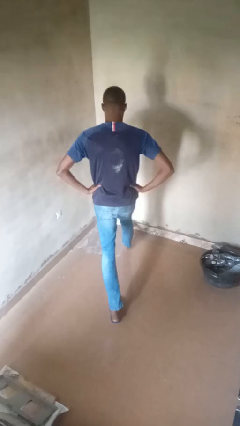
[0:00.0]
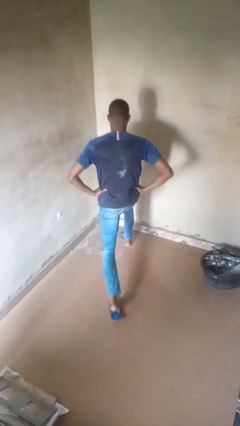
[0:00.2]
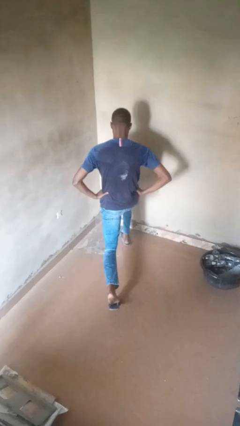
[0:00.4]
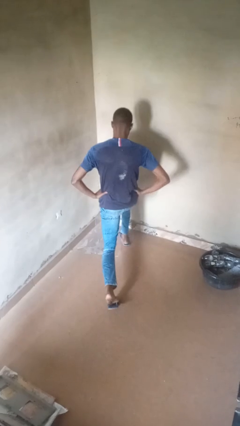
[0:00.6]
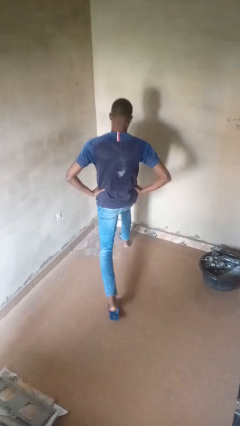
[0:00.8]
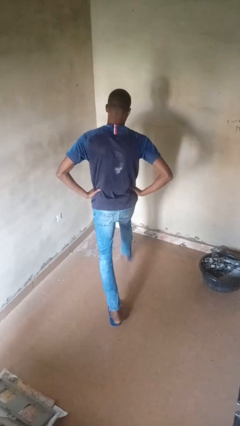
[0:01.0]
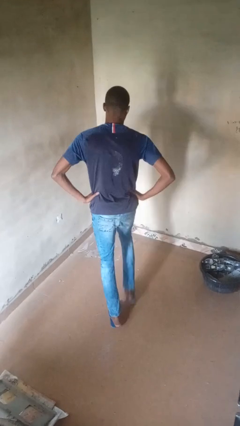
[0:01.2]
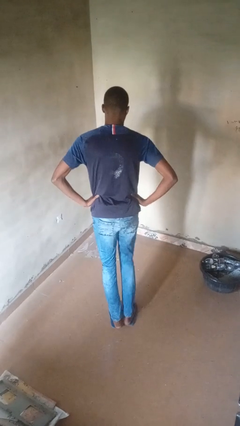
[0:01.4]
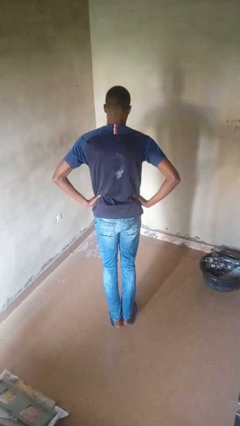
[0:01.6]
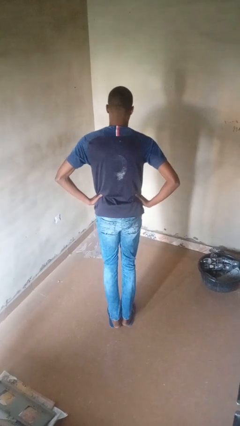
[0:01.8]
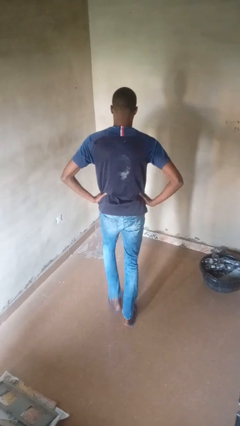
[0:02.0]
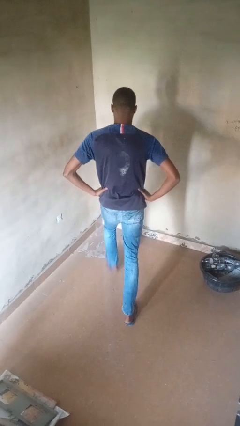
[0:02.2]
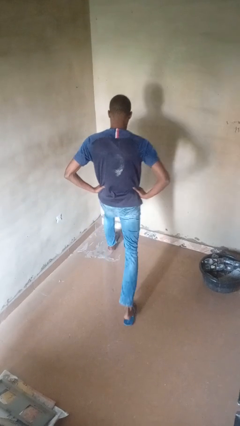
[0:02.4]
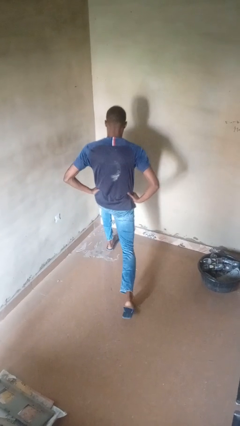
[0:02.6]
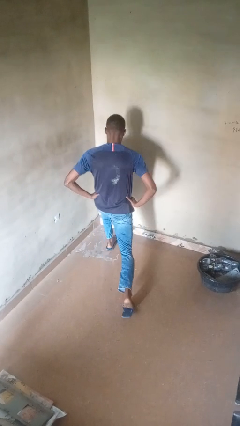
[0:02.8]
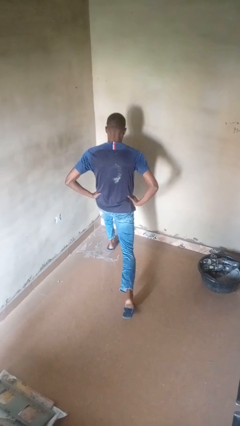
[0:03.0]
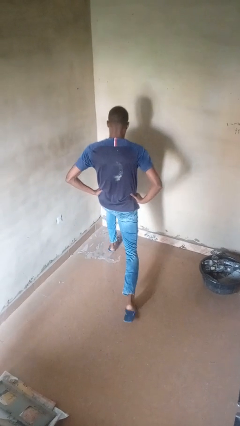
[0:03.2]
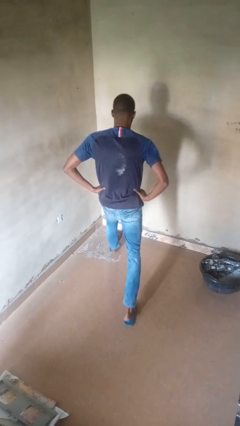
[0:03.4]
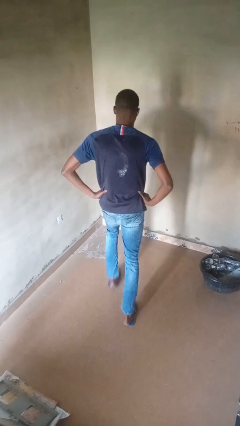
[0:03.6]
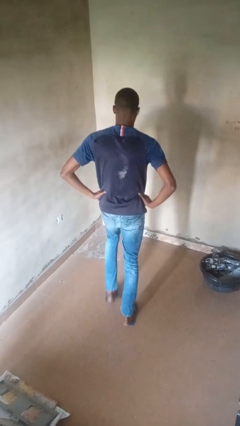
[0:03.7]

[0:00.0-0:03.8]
person exercises with lunges

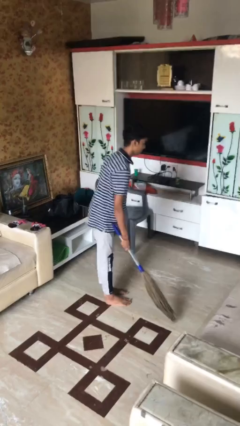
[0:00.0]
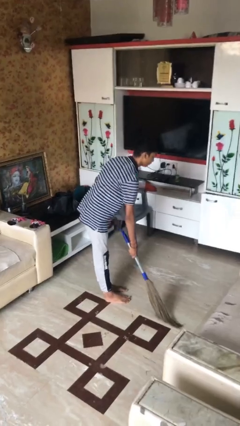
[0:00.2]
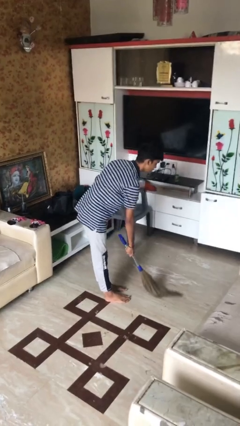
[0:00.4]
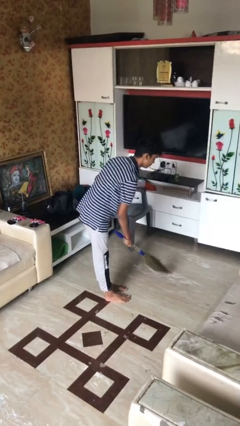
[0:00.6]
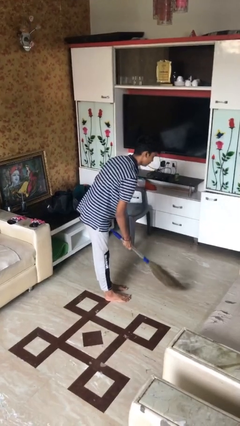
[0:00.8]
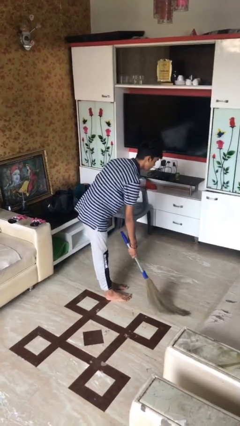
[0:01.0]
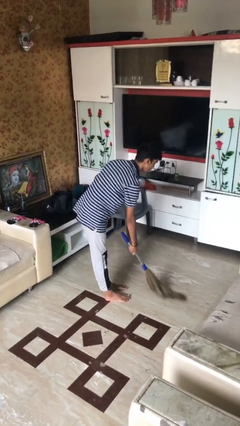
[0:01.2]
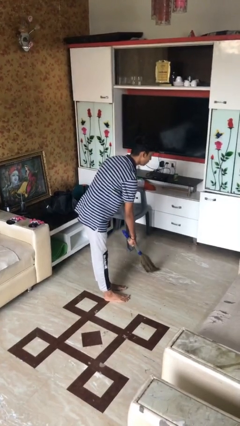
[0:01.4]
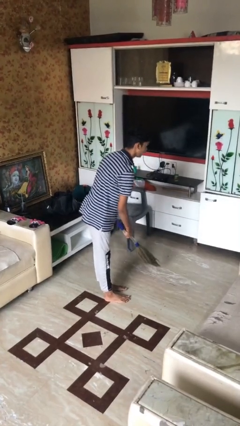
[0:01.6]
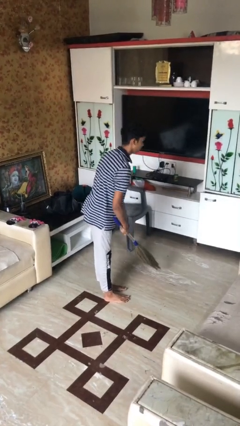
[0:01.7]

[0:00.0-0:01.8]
person sweeps floor

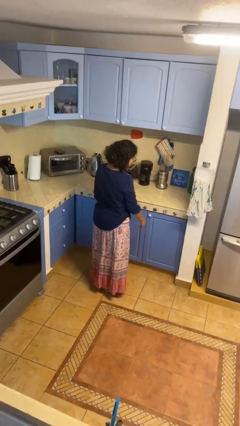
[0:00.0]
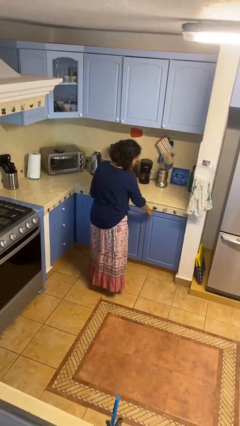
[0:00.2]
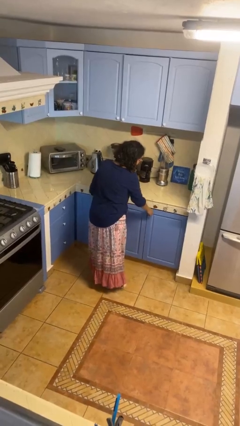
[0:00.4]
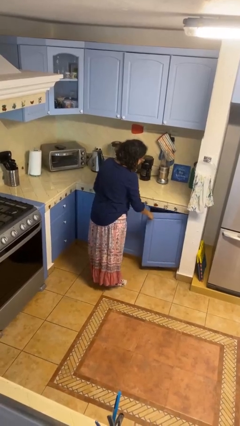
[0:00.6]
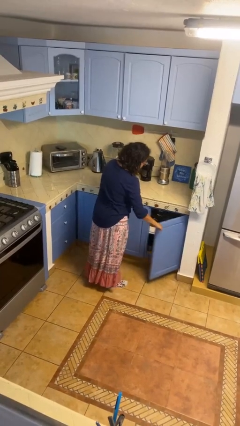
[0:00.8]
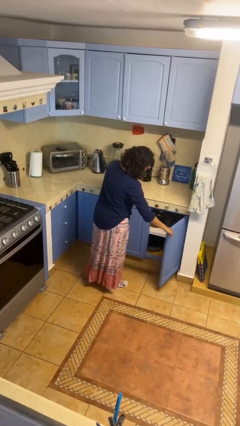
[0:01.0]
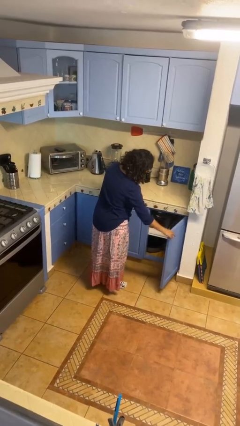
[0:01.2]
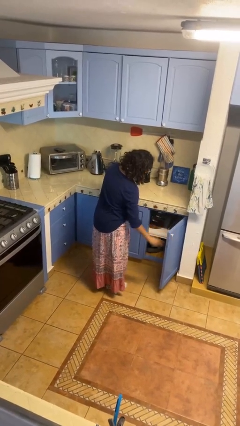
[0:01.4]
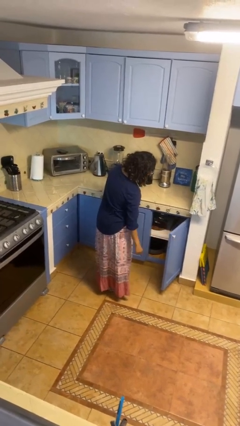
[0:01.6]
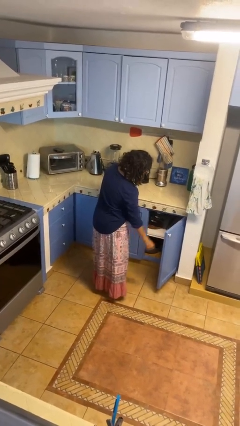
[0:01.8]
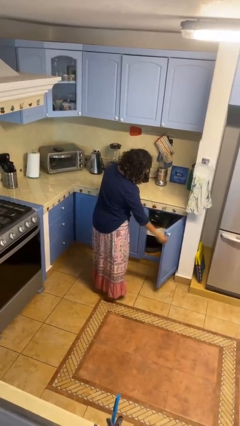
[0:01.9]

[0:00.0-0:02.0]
person opens cabinet

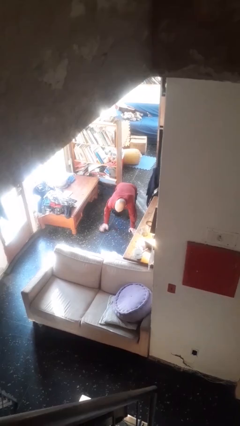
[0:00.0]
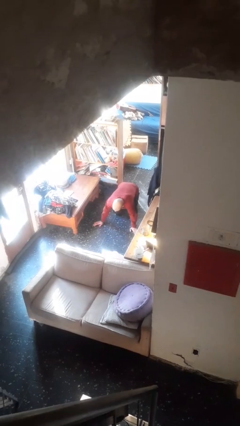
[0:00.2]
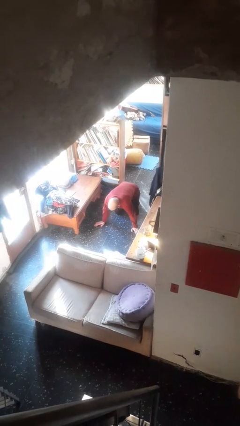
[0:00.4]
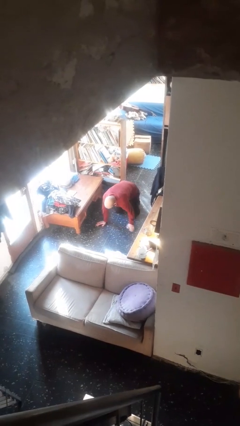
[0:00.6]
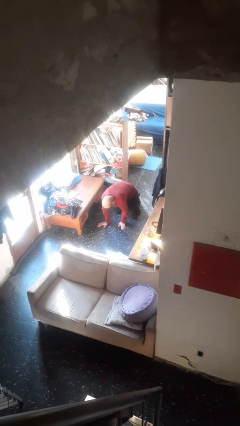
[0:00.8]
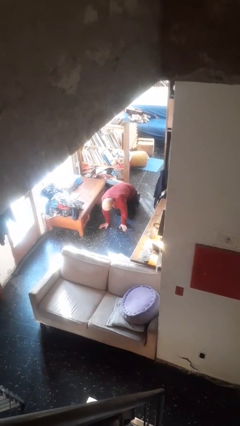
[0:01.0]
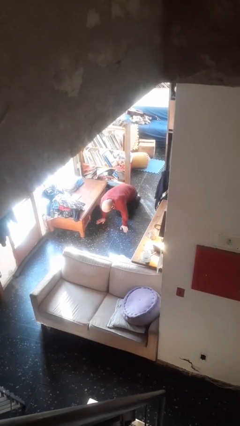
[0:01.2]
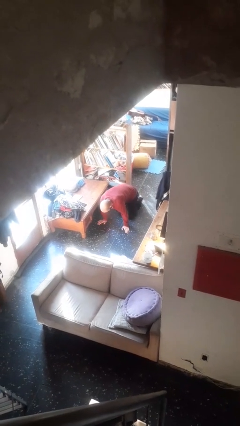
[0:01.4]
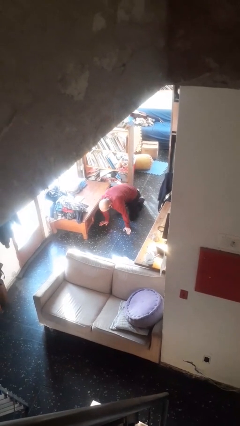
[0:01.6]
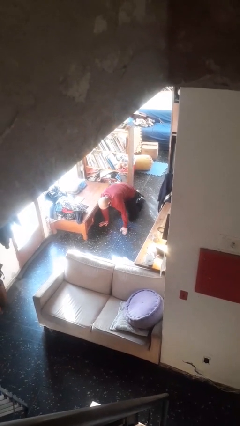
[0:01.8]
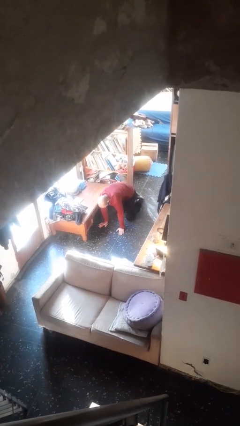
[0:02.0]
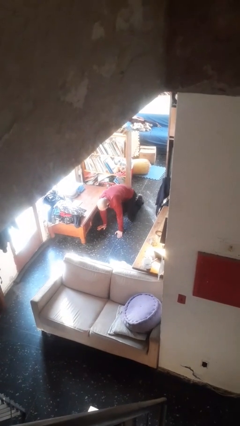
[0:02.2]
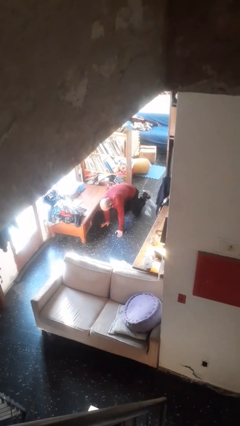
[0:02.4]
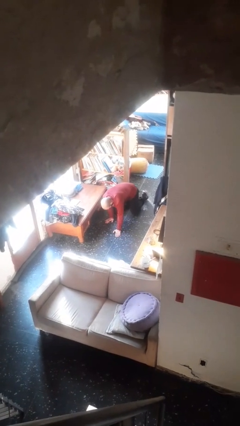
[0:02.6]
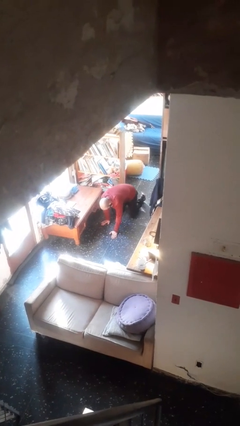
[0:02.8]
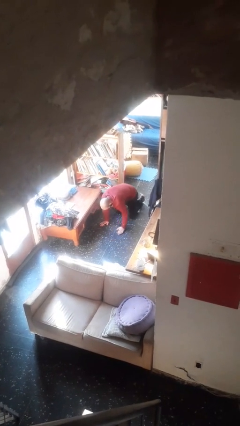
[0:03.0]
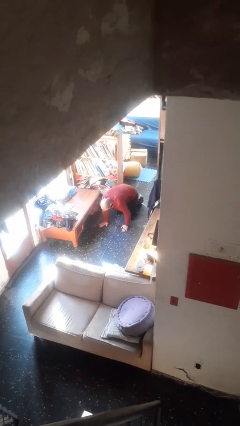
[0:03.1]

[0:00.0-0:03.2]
person crawls

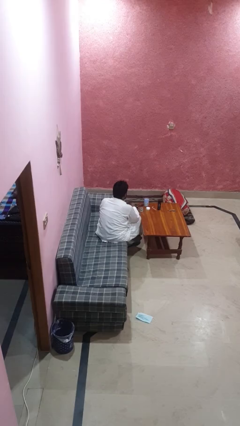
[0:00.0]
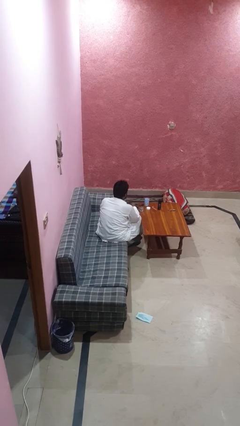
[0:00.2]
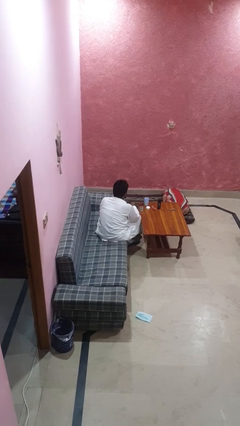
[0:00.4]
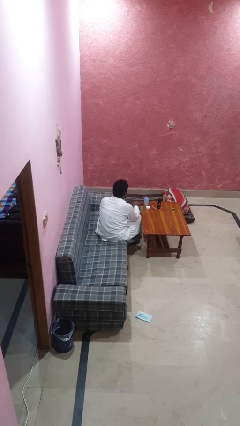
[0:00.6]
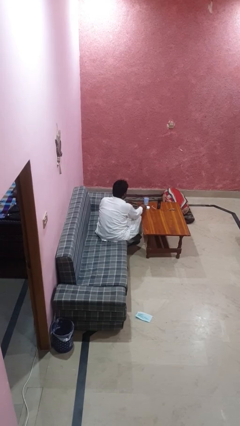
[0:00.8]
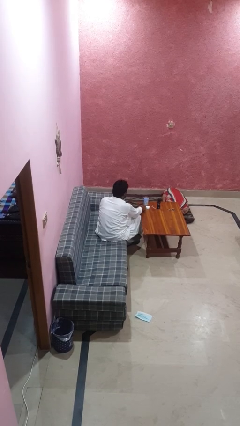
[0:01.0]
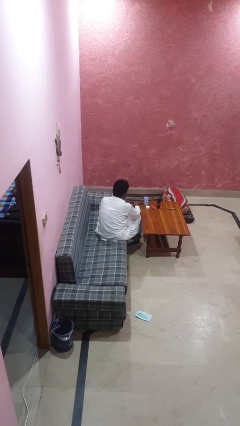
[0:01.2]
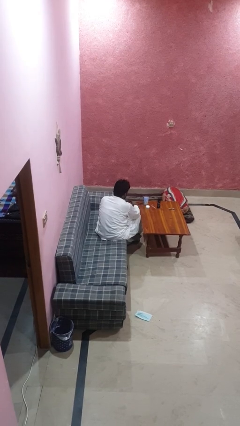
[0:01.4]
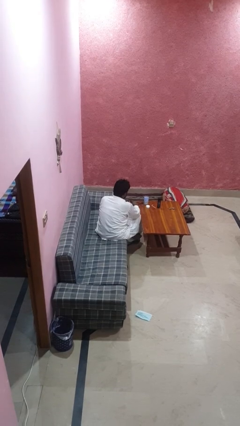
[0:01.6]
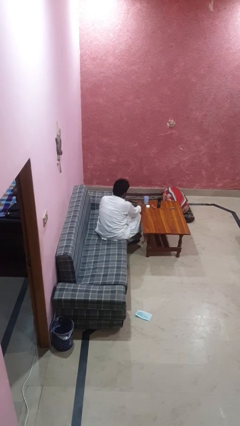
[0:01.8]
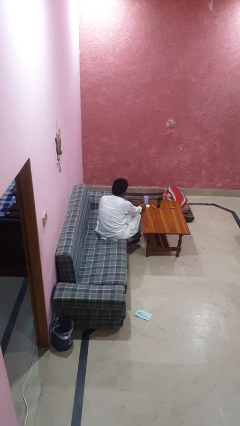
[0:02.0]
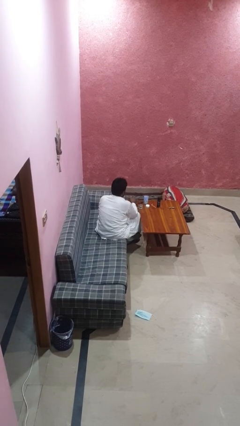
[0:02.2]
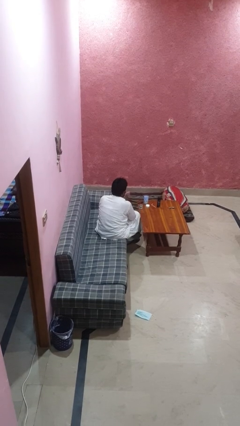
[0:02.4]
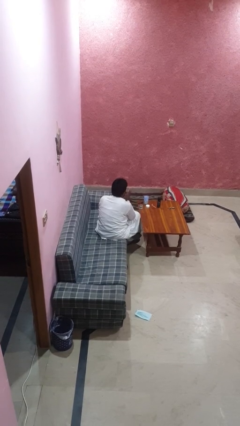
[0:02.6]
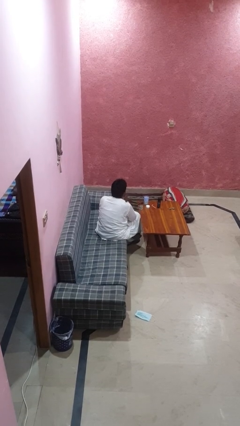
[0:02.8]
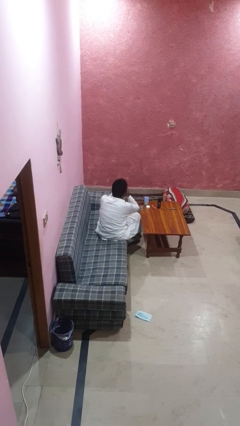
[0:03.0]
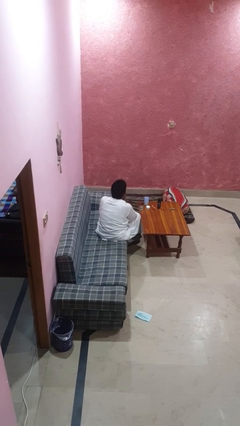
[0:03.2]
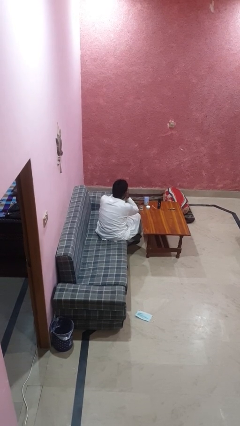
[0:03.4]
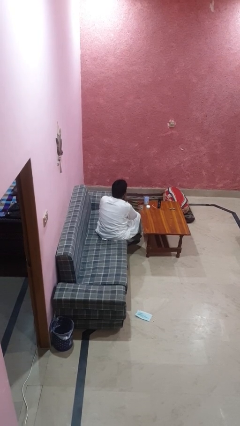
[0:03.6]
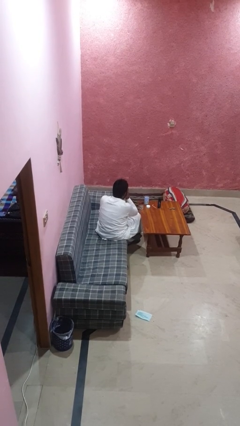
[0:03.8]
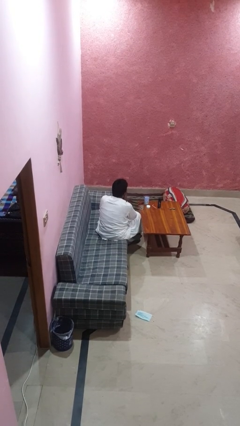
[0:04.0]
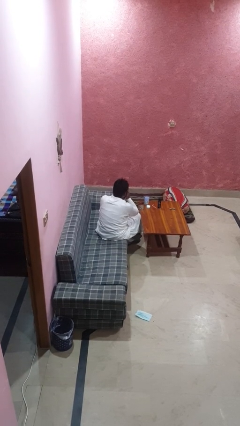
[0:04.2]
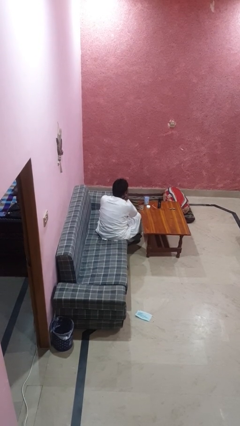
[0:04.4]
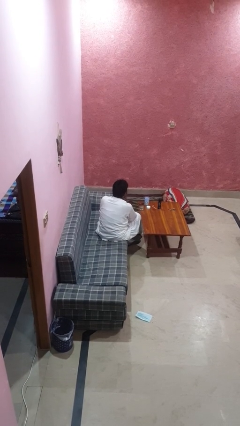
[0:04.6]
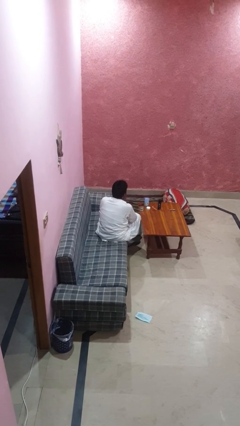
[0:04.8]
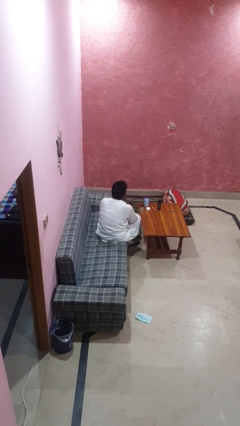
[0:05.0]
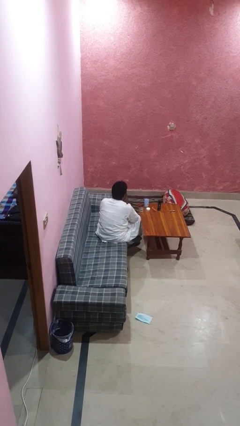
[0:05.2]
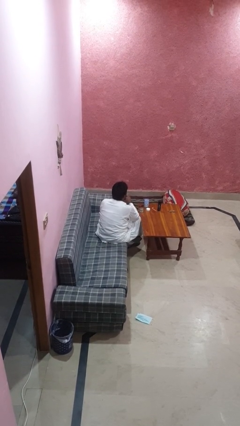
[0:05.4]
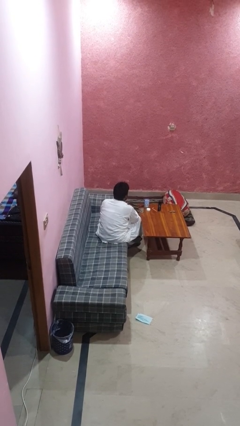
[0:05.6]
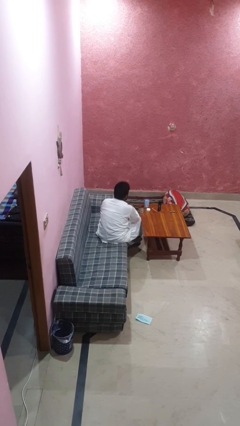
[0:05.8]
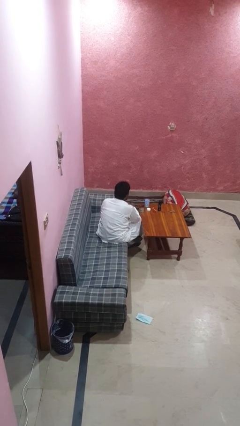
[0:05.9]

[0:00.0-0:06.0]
person applies facial moisturizer

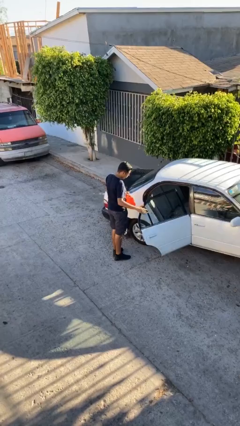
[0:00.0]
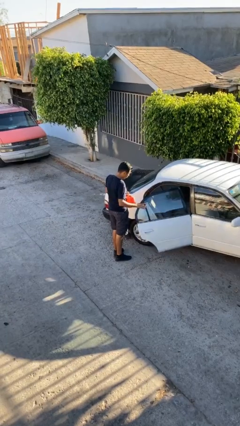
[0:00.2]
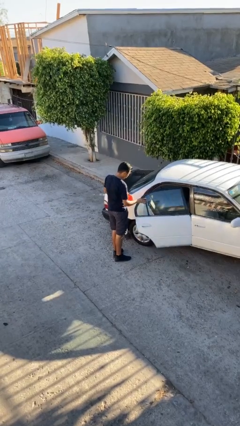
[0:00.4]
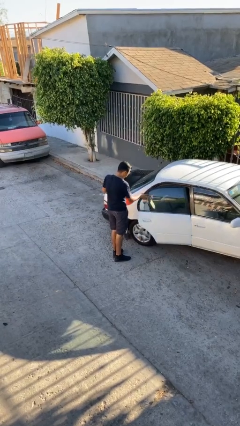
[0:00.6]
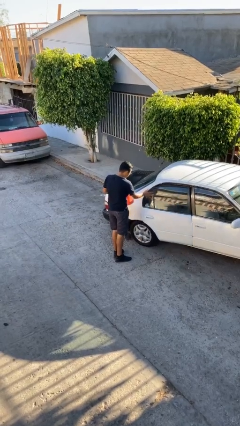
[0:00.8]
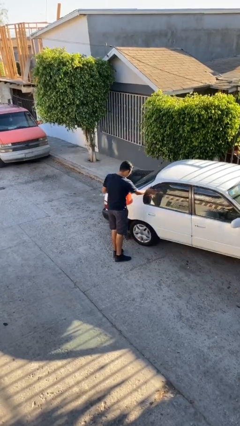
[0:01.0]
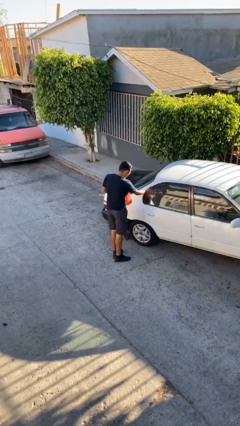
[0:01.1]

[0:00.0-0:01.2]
person closes car door
